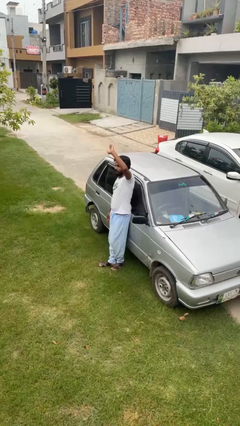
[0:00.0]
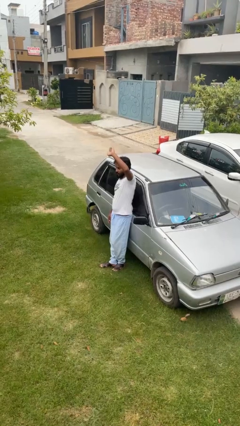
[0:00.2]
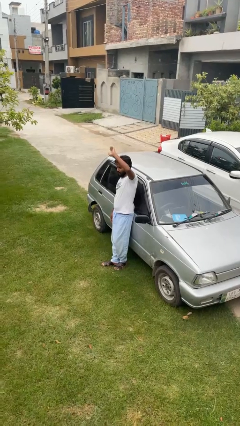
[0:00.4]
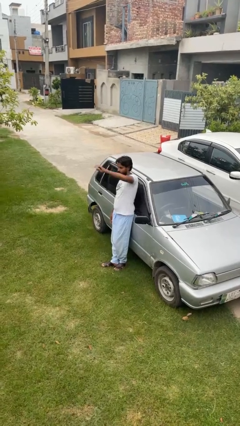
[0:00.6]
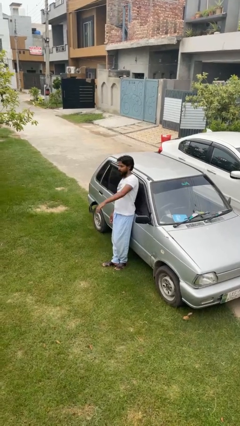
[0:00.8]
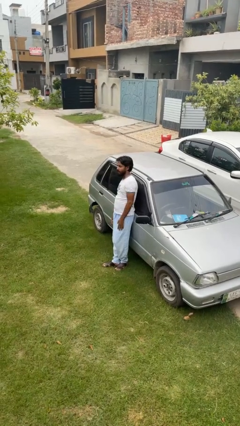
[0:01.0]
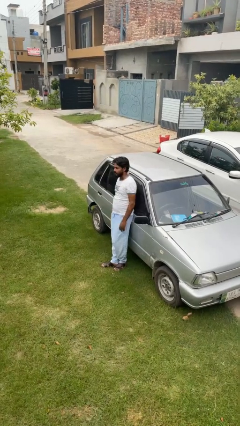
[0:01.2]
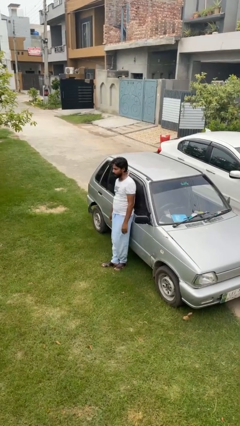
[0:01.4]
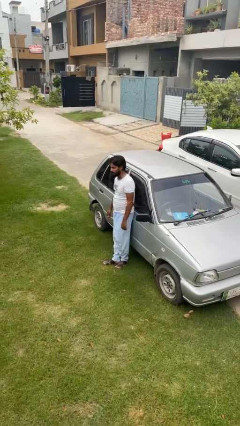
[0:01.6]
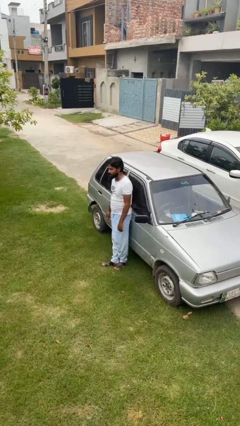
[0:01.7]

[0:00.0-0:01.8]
person gestures lower hand

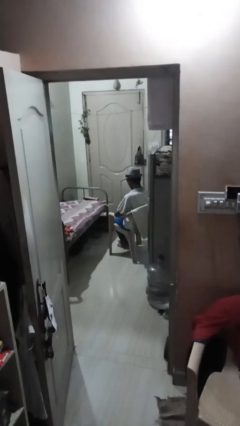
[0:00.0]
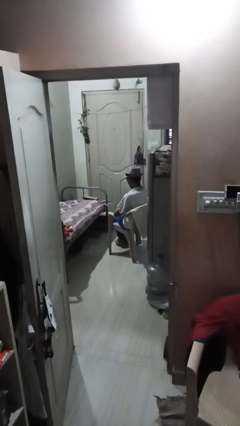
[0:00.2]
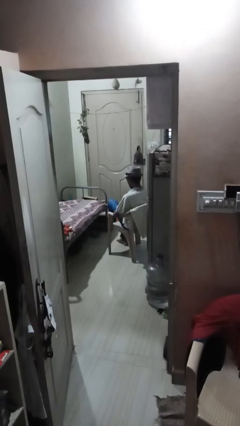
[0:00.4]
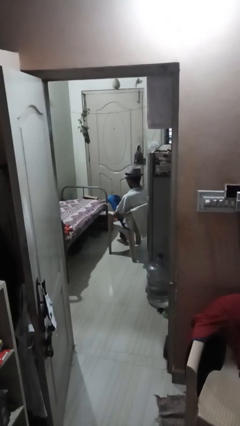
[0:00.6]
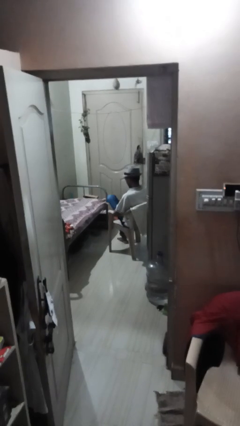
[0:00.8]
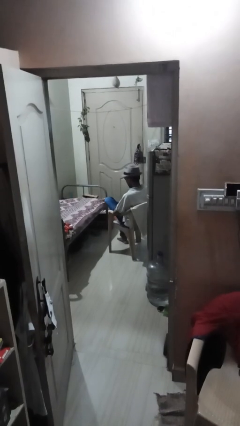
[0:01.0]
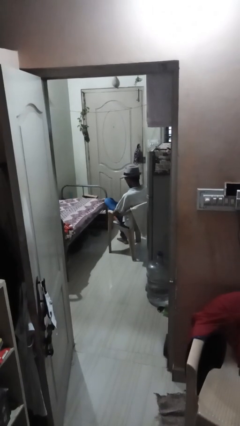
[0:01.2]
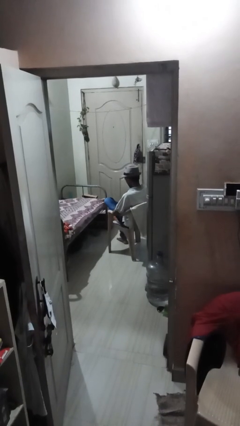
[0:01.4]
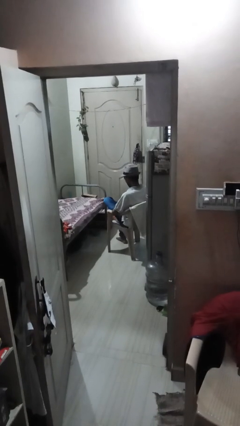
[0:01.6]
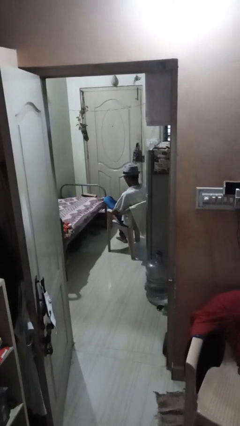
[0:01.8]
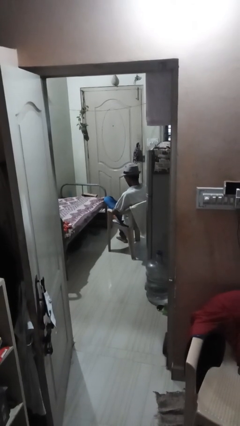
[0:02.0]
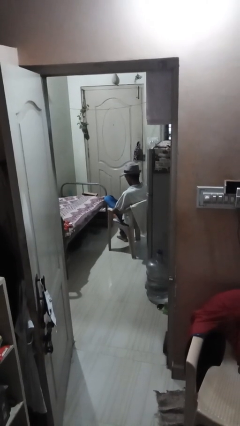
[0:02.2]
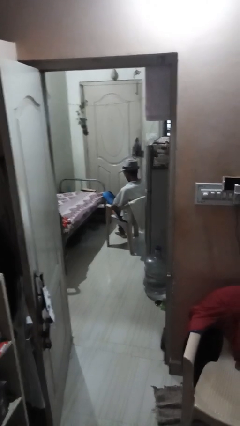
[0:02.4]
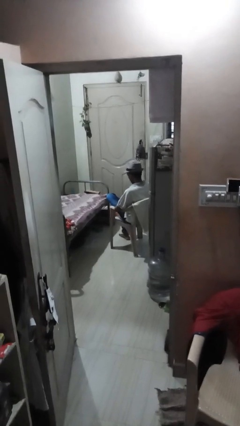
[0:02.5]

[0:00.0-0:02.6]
person crosses legs

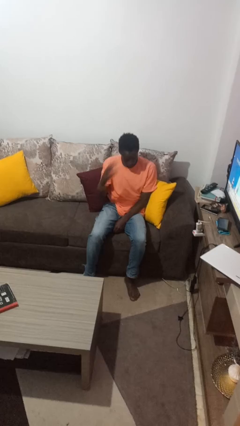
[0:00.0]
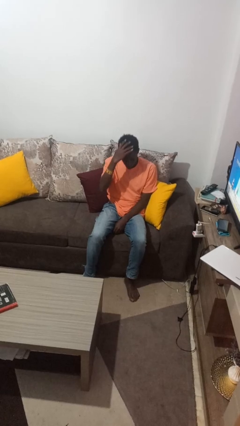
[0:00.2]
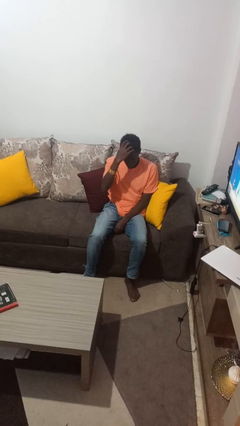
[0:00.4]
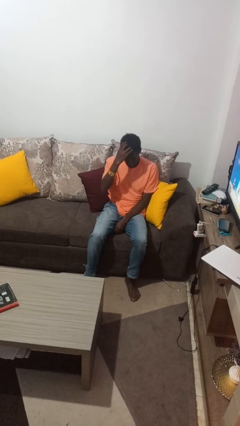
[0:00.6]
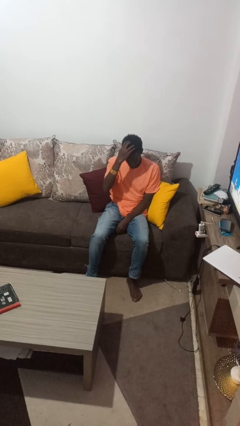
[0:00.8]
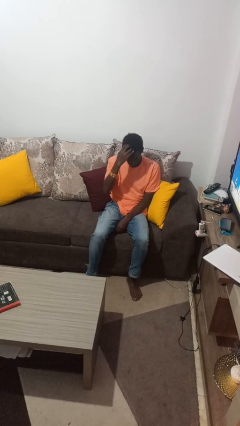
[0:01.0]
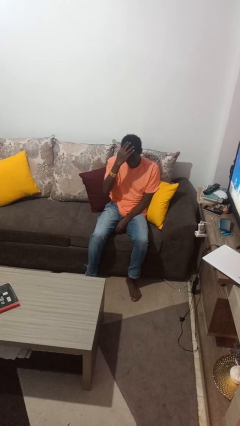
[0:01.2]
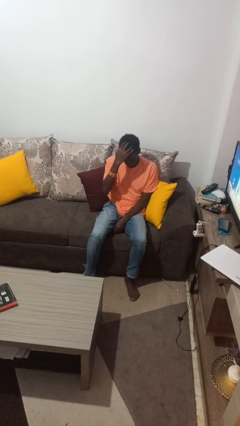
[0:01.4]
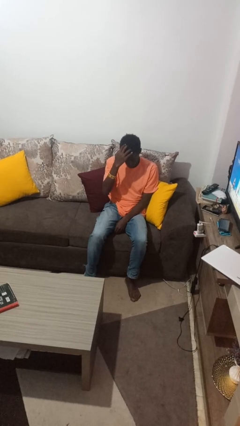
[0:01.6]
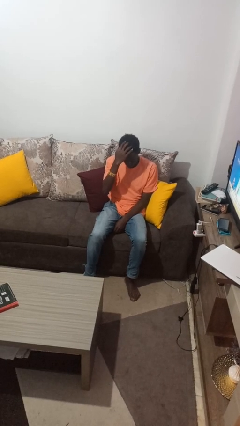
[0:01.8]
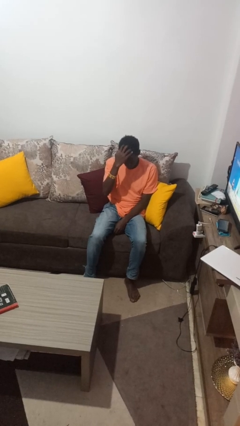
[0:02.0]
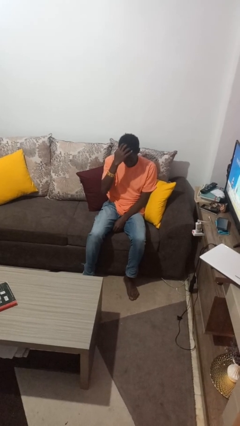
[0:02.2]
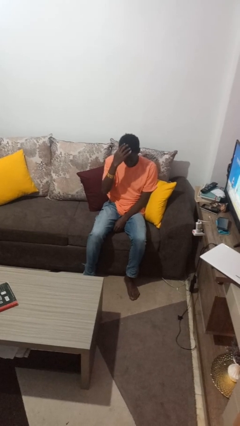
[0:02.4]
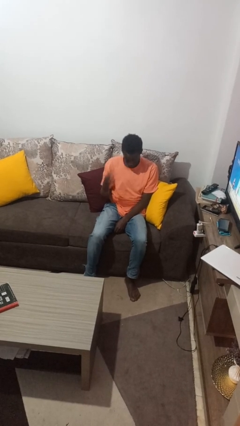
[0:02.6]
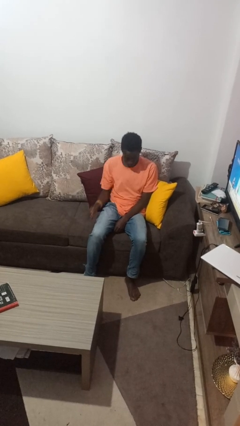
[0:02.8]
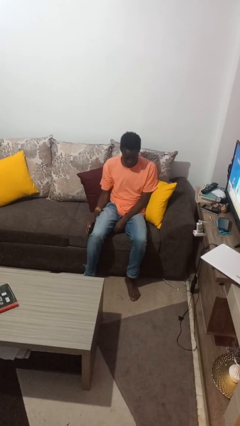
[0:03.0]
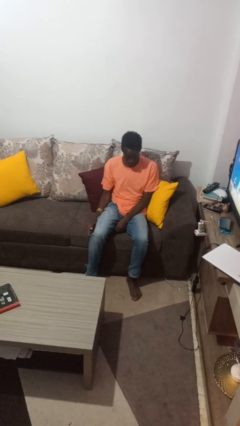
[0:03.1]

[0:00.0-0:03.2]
person strokes hair

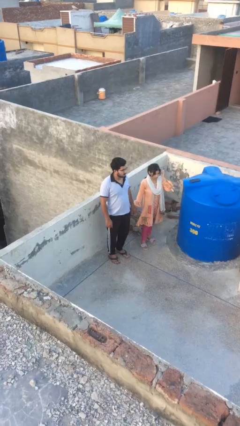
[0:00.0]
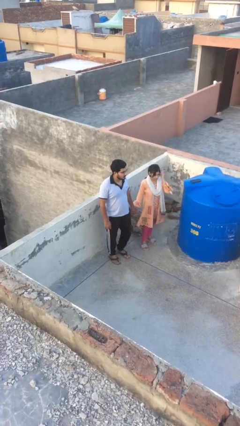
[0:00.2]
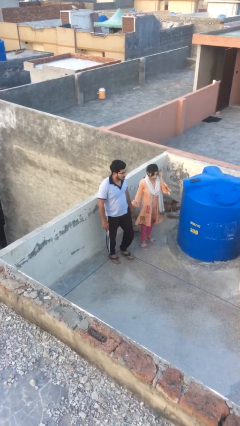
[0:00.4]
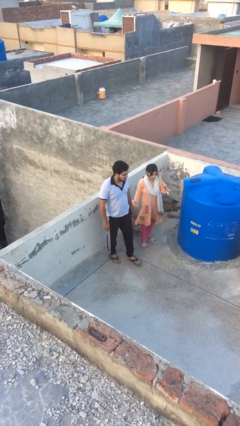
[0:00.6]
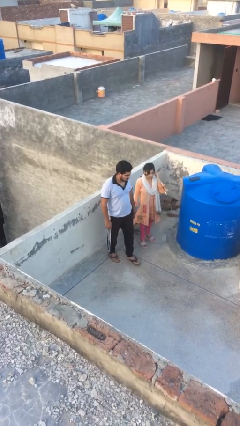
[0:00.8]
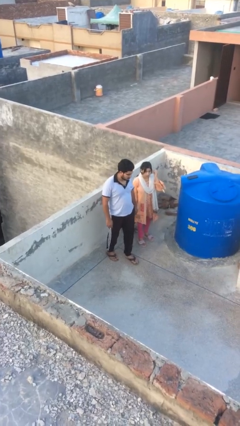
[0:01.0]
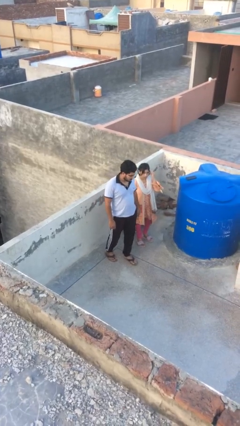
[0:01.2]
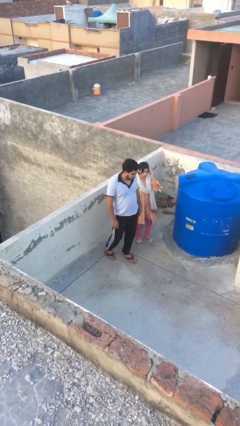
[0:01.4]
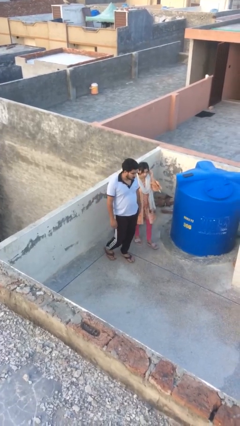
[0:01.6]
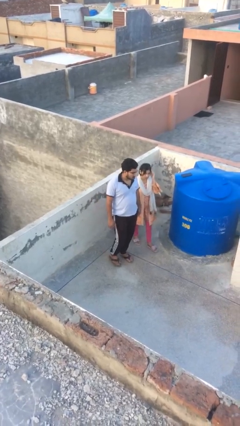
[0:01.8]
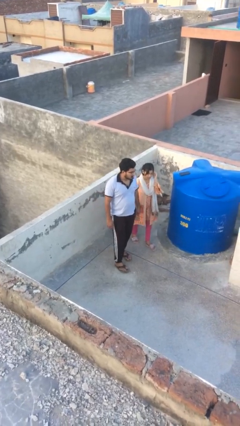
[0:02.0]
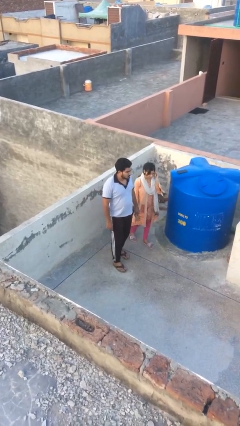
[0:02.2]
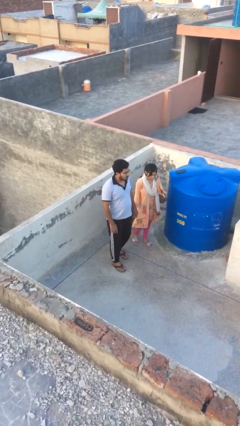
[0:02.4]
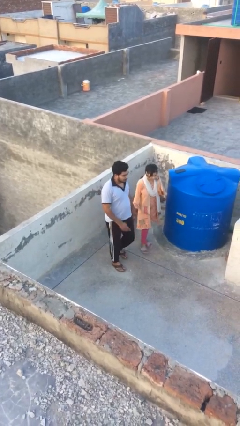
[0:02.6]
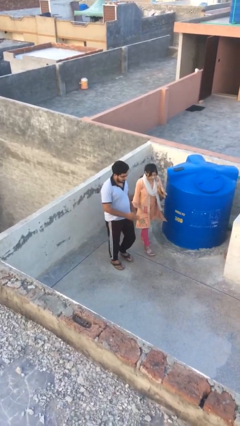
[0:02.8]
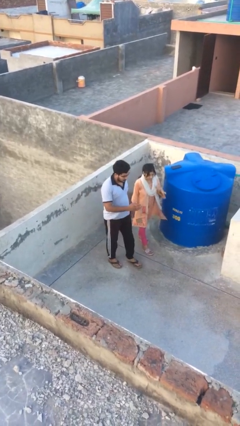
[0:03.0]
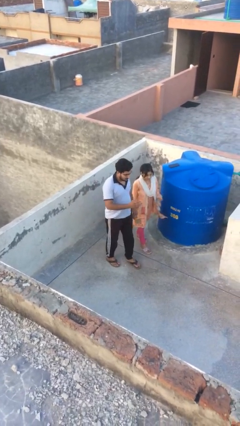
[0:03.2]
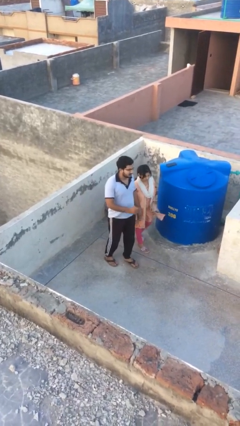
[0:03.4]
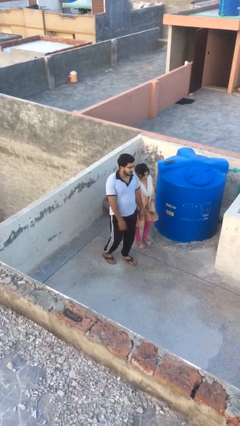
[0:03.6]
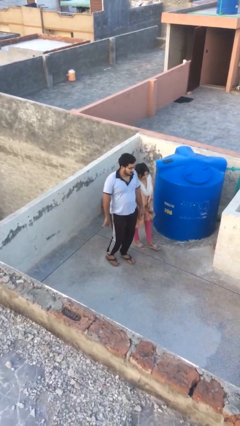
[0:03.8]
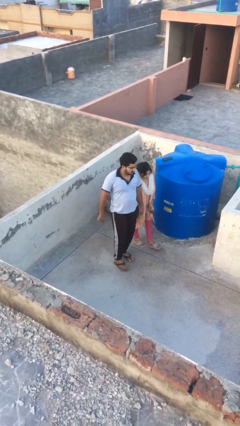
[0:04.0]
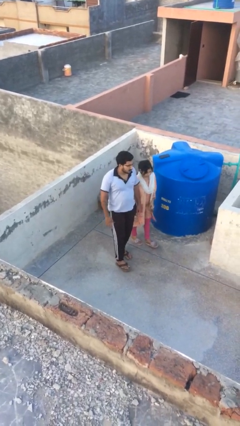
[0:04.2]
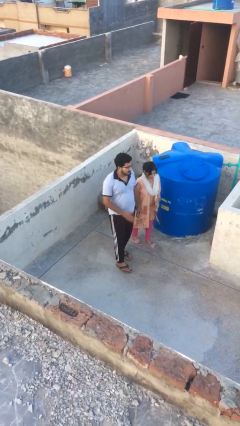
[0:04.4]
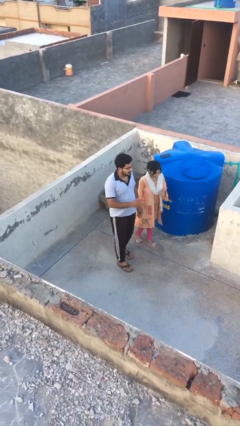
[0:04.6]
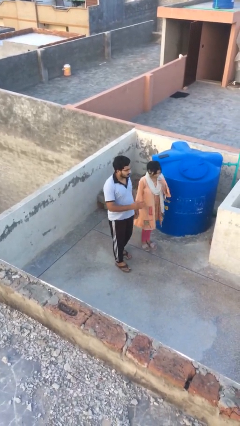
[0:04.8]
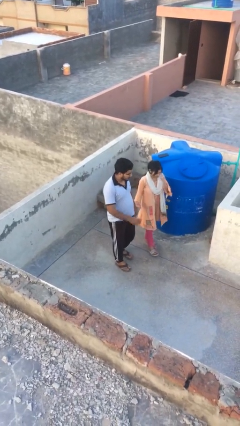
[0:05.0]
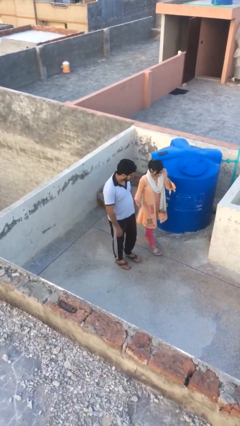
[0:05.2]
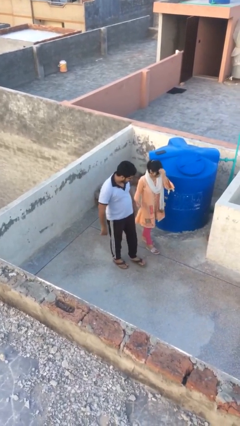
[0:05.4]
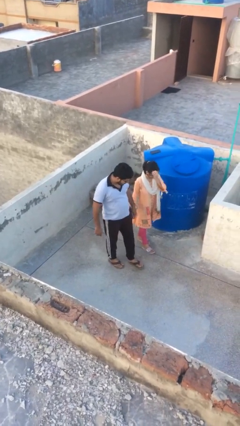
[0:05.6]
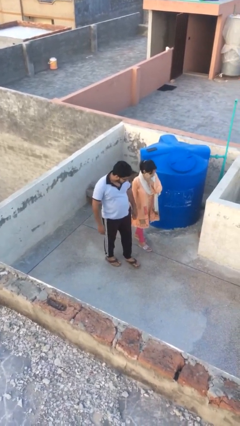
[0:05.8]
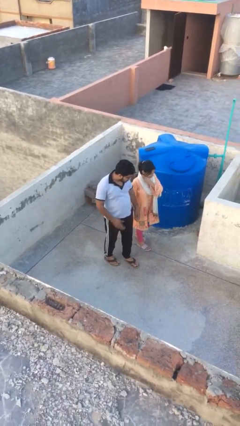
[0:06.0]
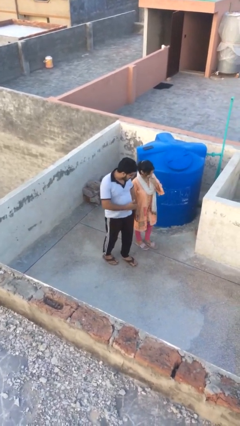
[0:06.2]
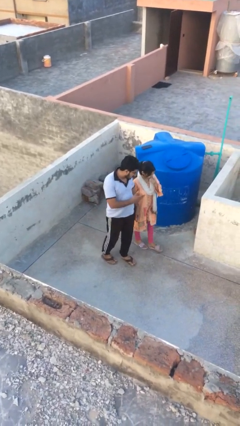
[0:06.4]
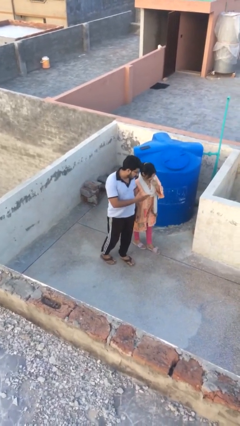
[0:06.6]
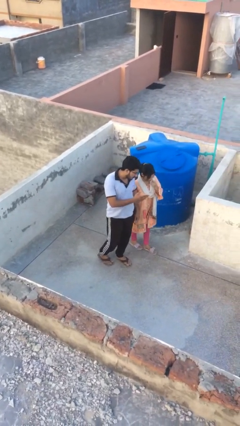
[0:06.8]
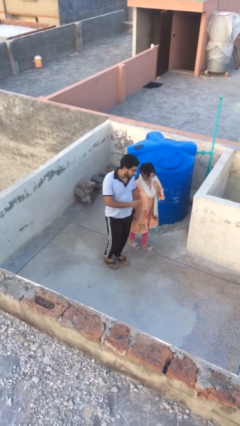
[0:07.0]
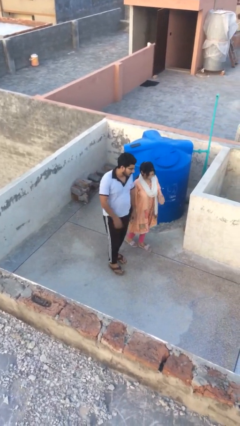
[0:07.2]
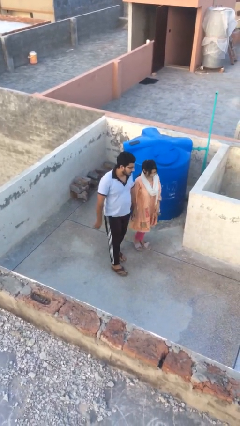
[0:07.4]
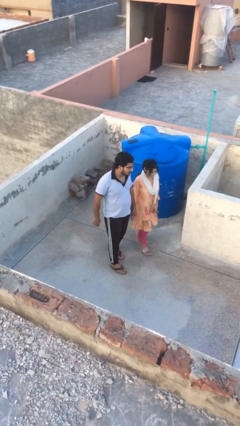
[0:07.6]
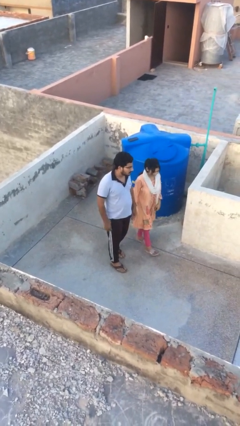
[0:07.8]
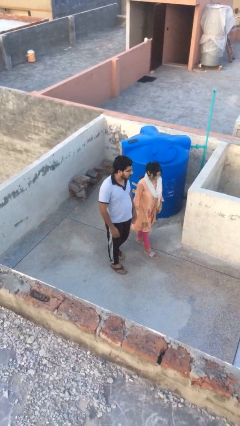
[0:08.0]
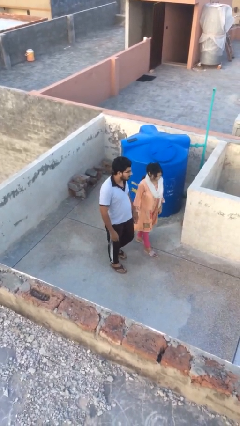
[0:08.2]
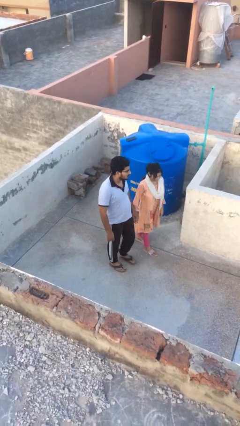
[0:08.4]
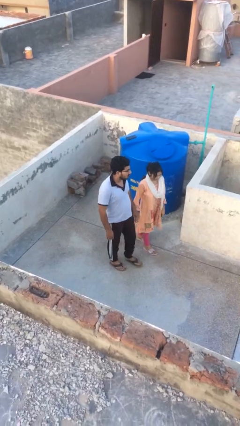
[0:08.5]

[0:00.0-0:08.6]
person holds hand

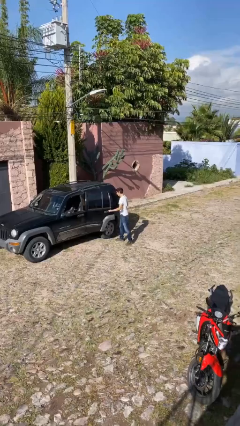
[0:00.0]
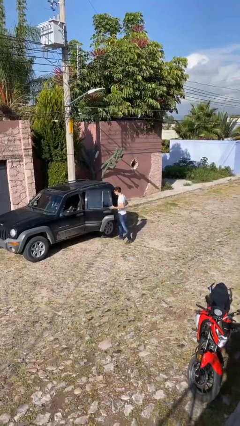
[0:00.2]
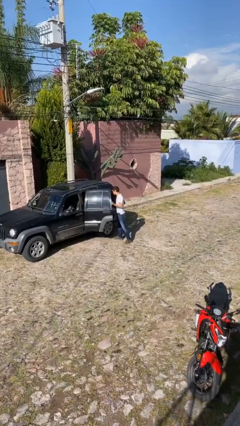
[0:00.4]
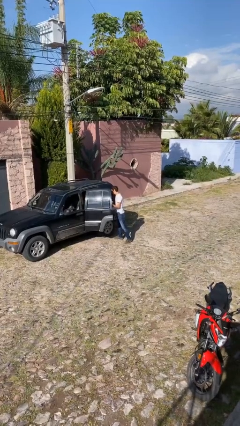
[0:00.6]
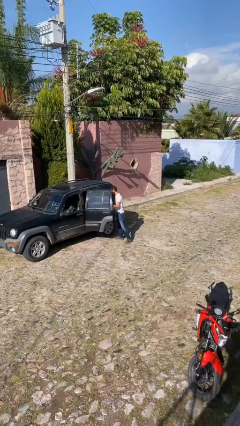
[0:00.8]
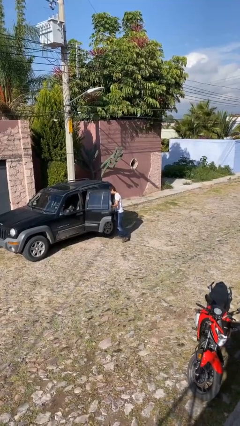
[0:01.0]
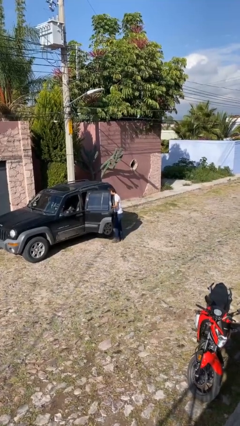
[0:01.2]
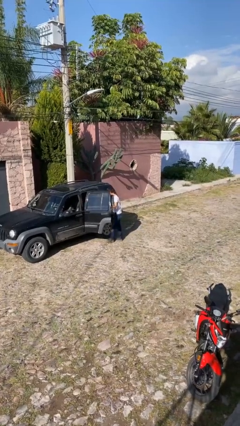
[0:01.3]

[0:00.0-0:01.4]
person opens car door

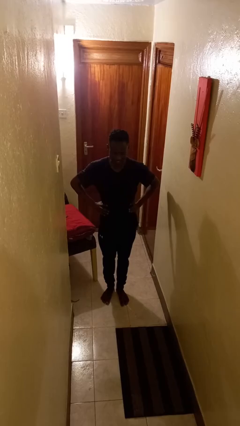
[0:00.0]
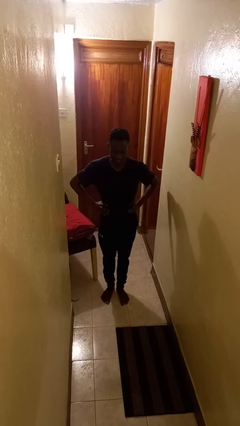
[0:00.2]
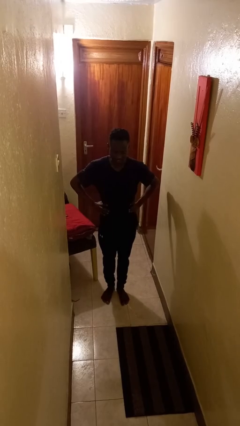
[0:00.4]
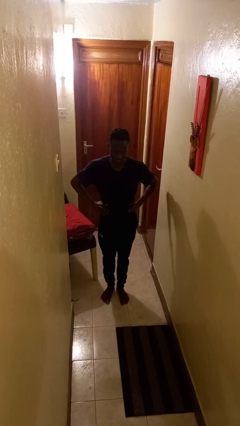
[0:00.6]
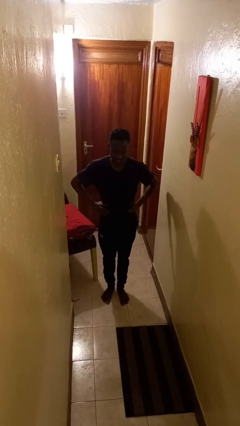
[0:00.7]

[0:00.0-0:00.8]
person exercises with lunges
